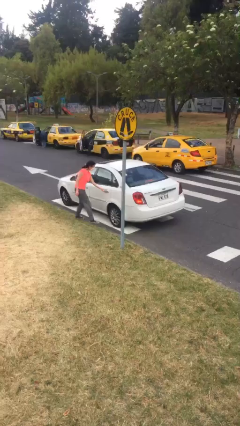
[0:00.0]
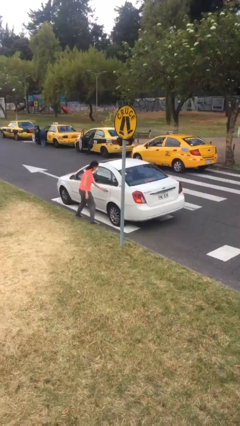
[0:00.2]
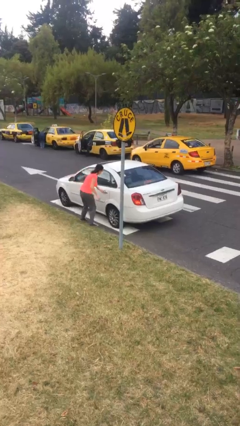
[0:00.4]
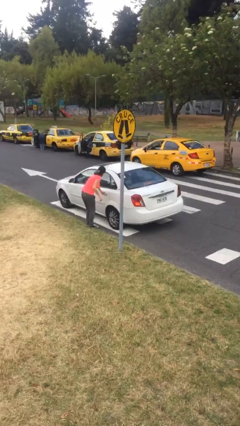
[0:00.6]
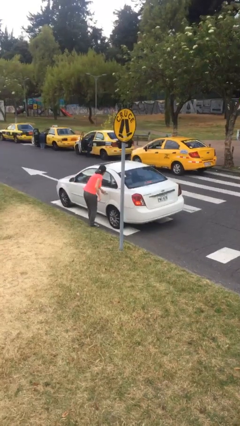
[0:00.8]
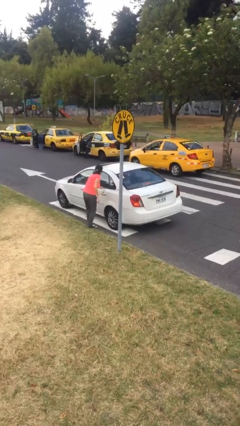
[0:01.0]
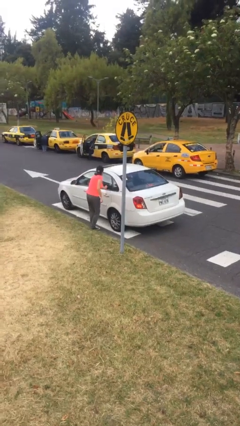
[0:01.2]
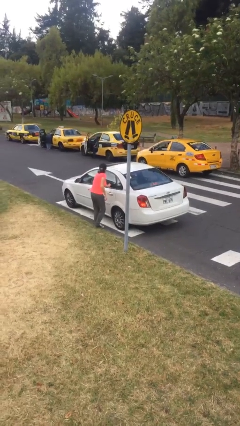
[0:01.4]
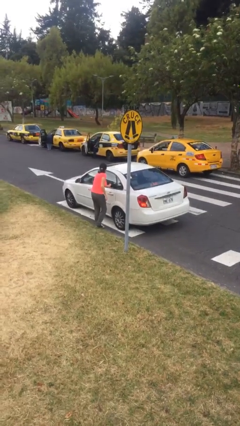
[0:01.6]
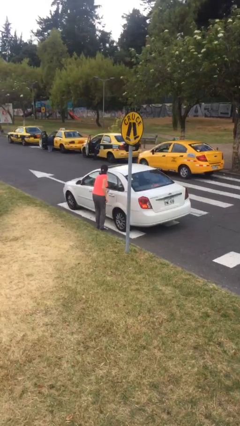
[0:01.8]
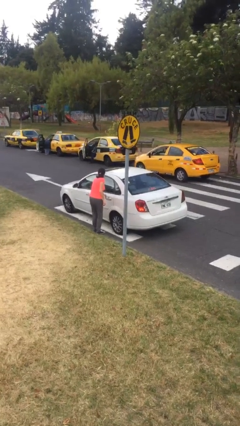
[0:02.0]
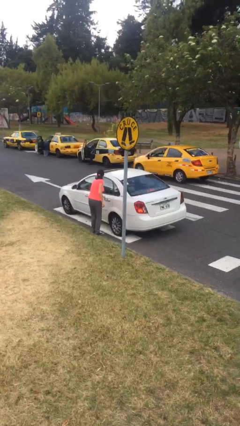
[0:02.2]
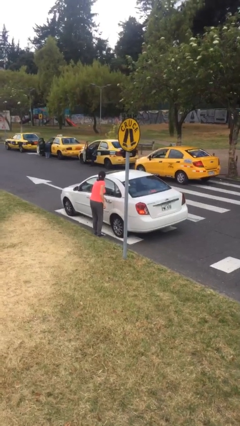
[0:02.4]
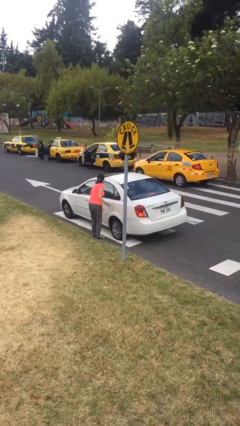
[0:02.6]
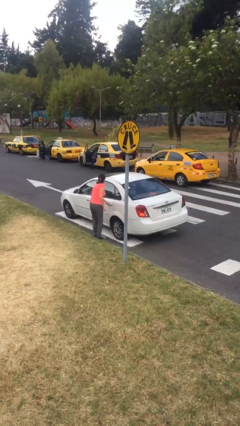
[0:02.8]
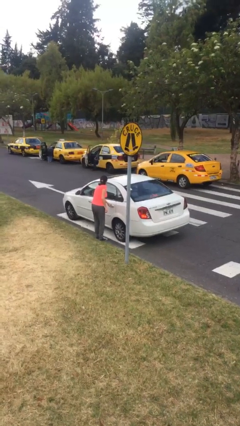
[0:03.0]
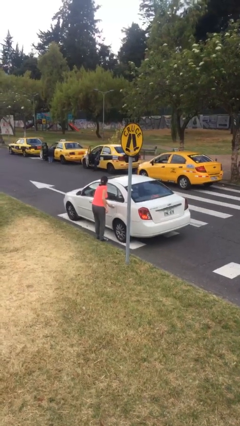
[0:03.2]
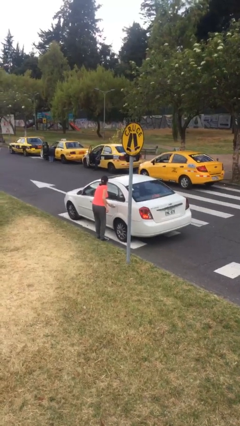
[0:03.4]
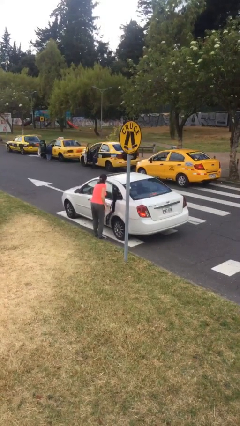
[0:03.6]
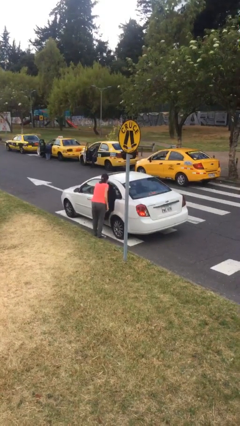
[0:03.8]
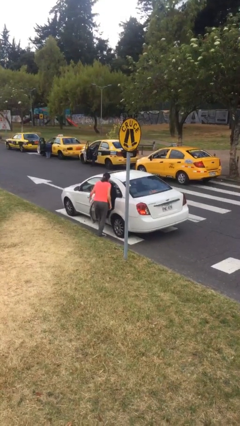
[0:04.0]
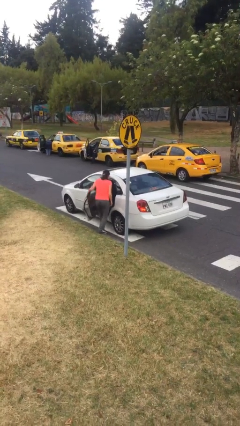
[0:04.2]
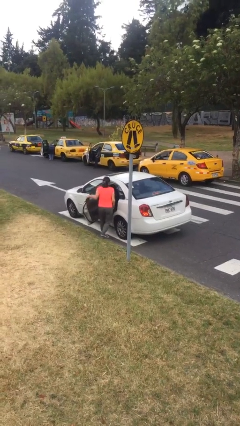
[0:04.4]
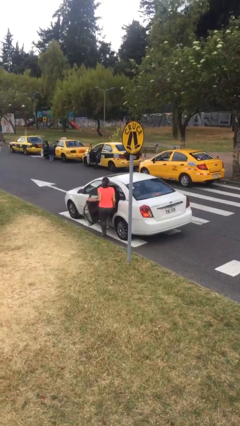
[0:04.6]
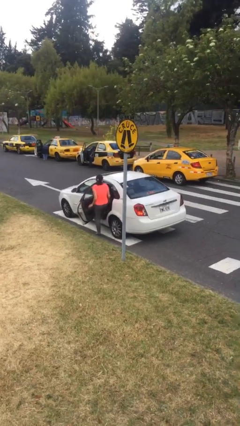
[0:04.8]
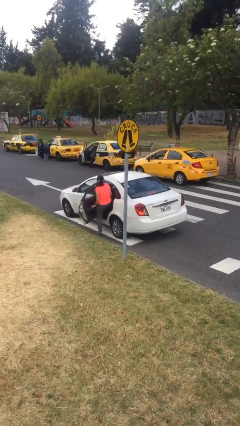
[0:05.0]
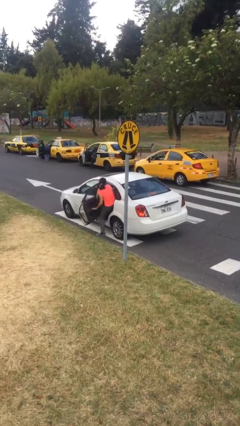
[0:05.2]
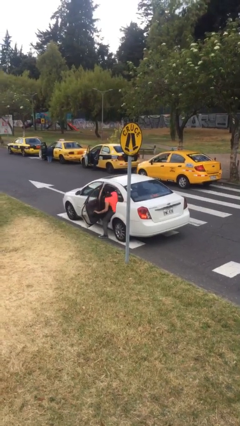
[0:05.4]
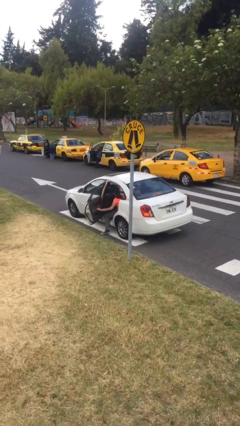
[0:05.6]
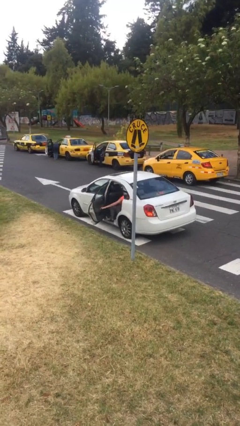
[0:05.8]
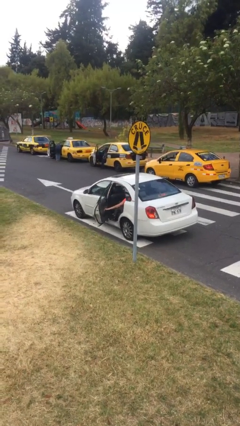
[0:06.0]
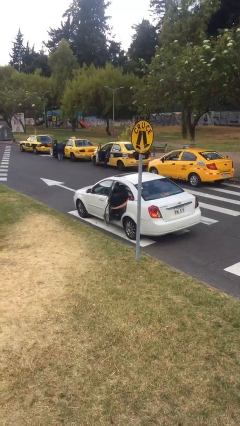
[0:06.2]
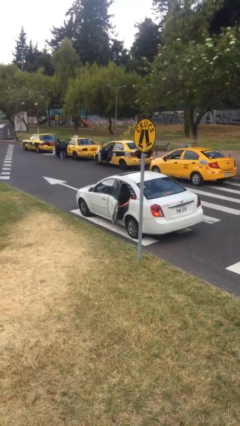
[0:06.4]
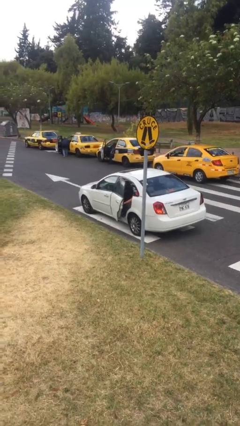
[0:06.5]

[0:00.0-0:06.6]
car picks up person

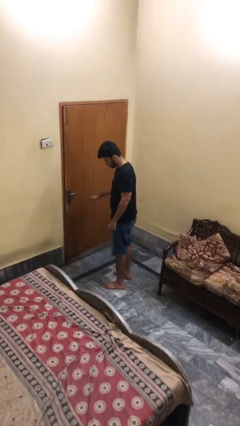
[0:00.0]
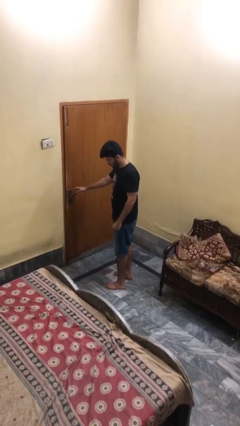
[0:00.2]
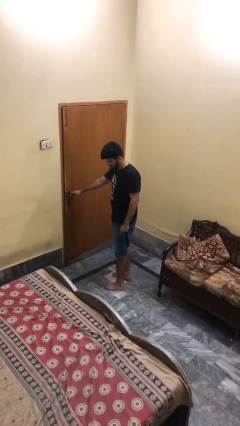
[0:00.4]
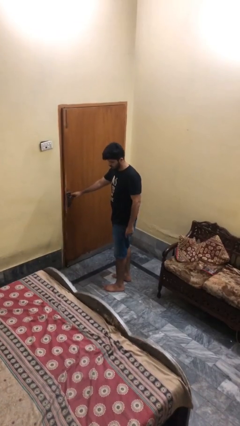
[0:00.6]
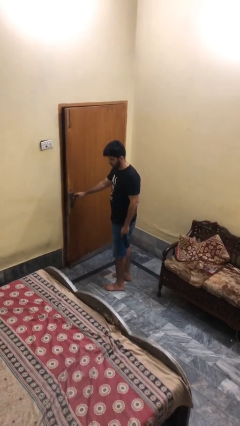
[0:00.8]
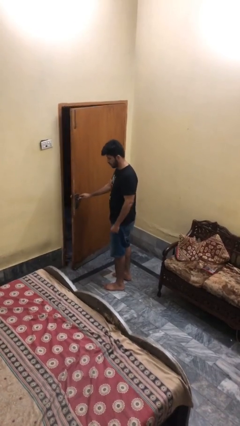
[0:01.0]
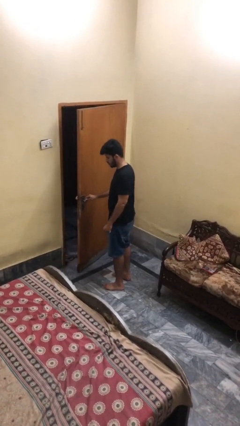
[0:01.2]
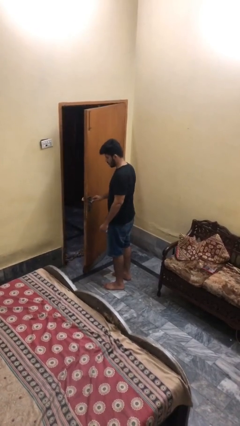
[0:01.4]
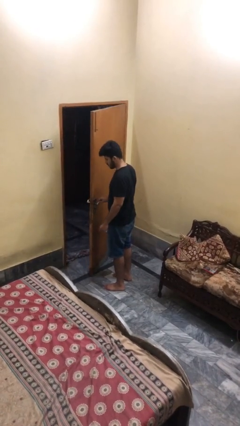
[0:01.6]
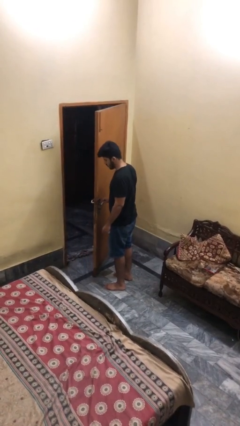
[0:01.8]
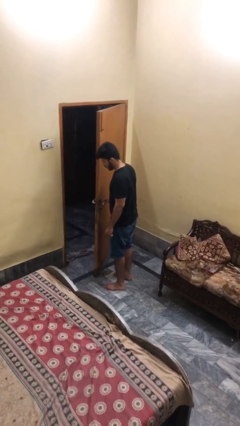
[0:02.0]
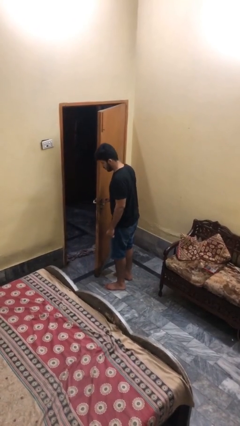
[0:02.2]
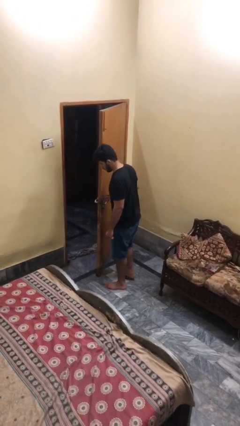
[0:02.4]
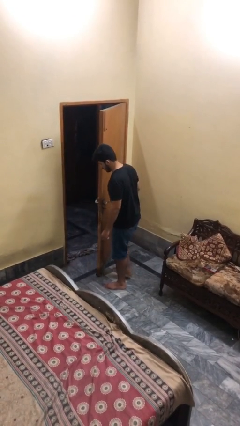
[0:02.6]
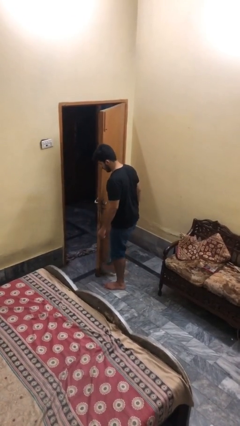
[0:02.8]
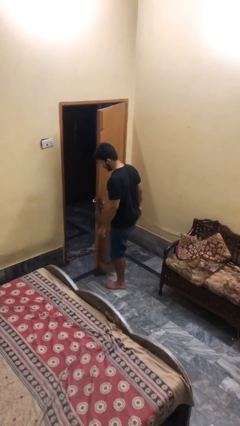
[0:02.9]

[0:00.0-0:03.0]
person opens facility door

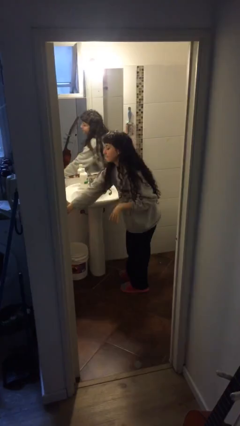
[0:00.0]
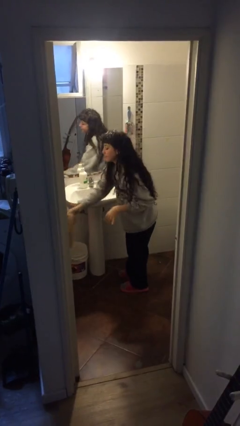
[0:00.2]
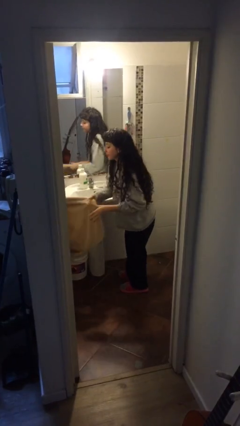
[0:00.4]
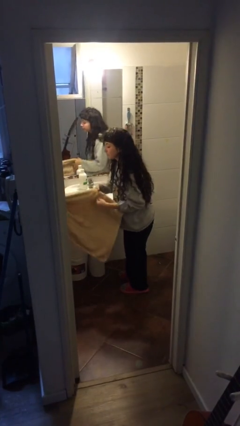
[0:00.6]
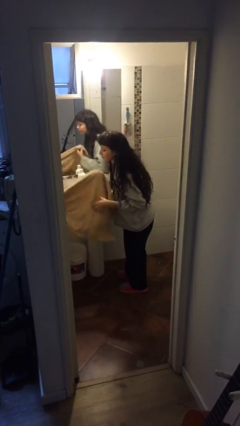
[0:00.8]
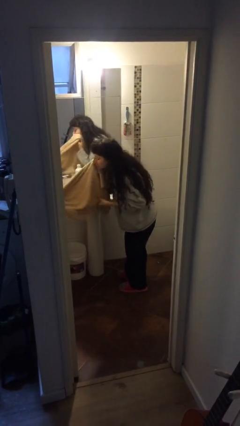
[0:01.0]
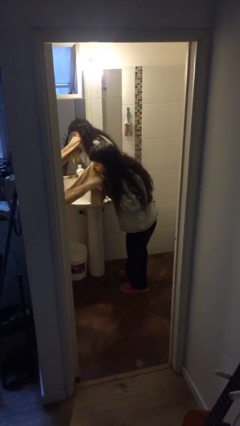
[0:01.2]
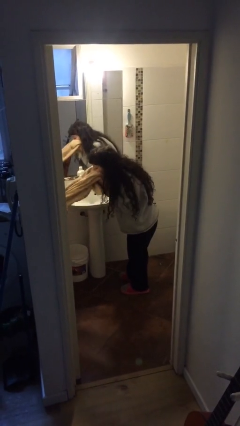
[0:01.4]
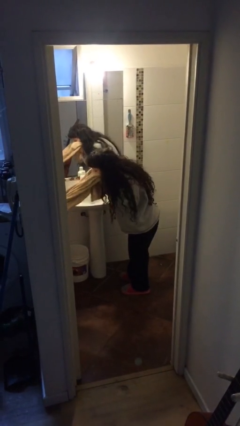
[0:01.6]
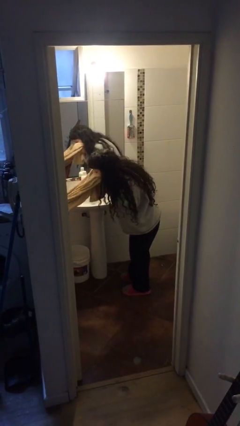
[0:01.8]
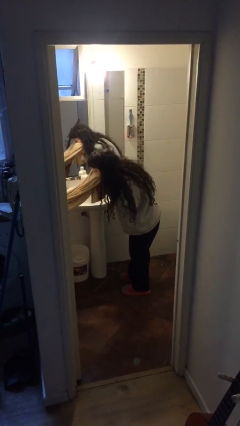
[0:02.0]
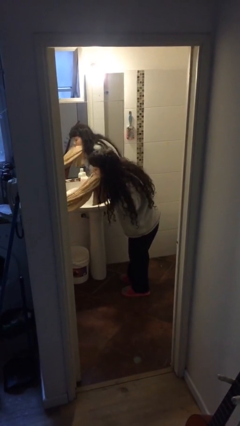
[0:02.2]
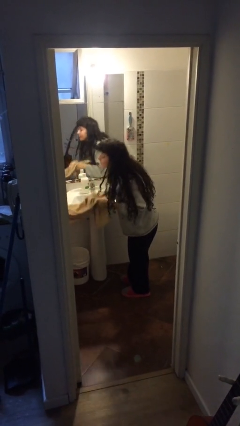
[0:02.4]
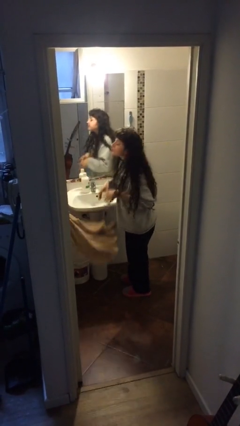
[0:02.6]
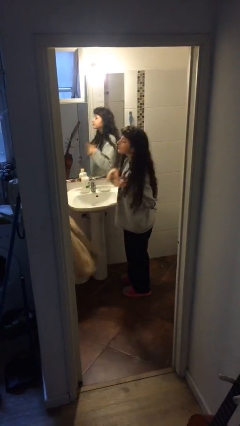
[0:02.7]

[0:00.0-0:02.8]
person dries face with towel

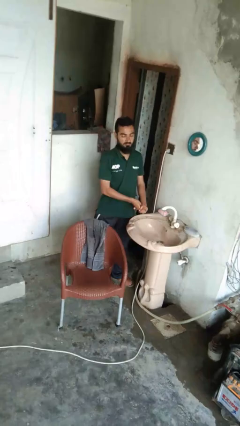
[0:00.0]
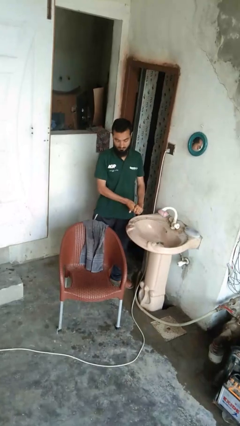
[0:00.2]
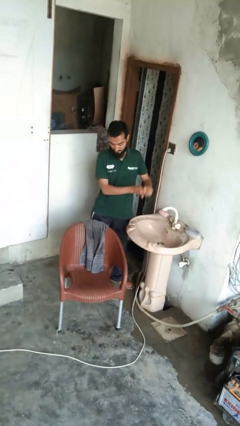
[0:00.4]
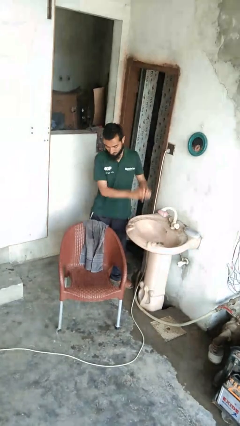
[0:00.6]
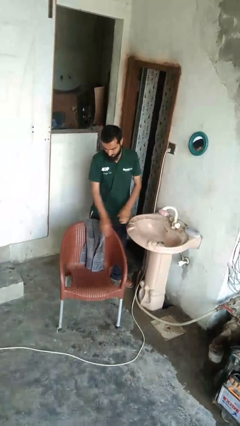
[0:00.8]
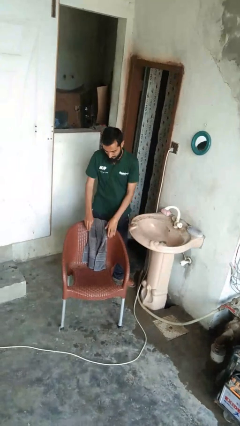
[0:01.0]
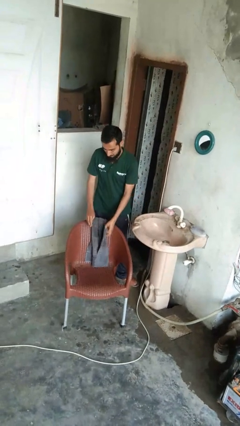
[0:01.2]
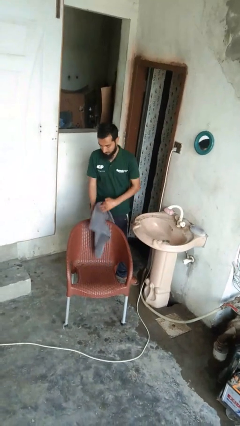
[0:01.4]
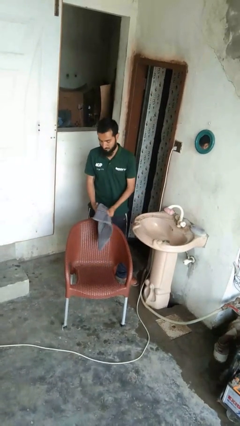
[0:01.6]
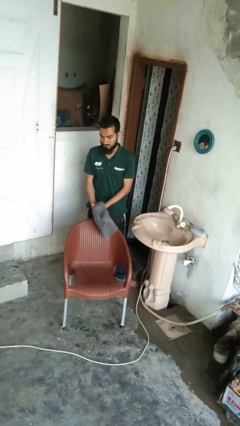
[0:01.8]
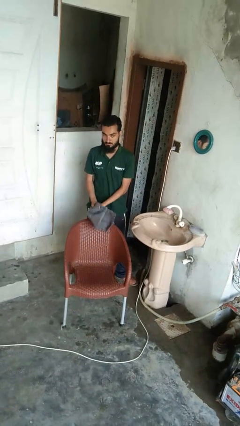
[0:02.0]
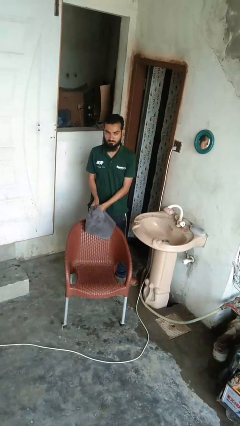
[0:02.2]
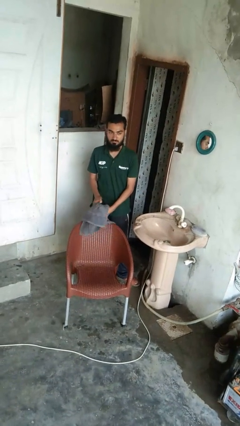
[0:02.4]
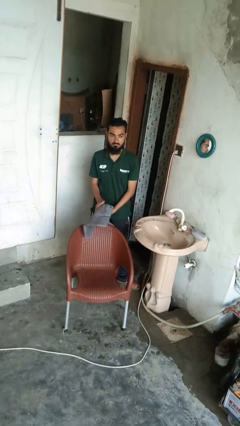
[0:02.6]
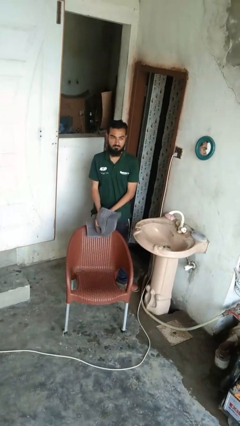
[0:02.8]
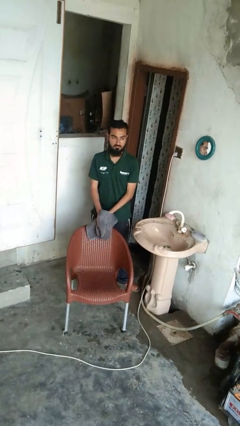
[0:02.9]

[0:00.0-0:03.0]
person dries hands with towel

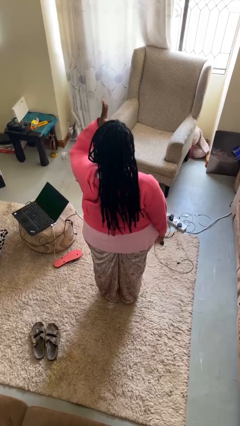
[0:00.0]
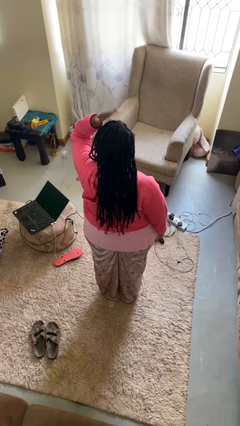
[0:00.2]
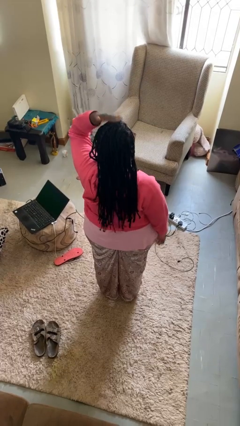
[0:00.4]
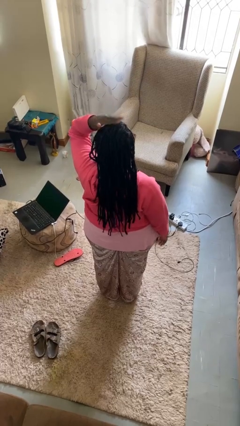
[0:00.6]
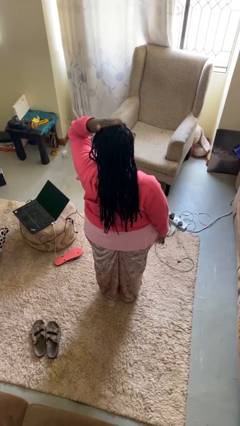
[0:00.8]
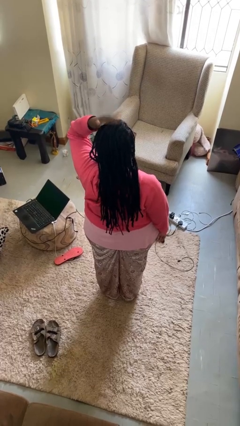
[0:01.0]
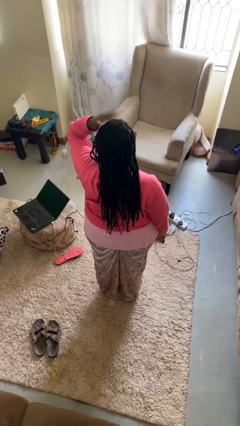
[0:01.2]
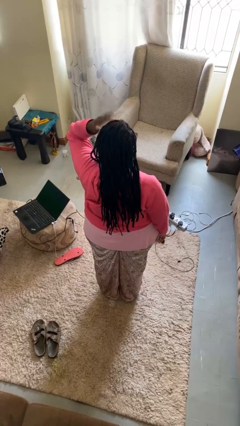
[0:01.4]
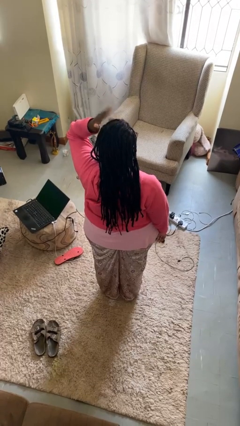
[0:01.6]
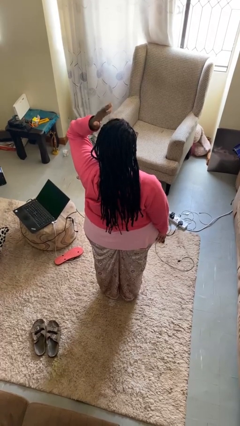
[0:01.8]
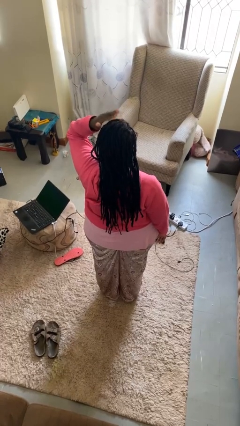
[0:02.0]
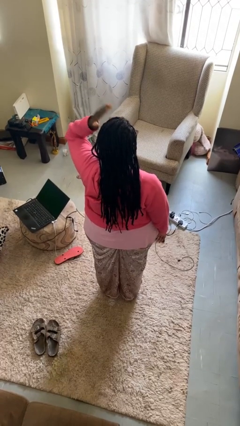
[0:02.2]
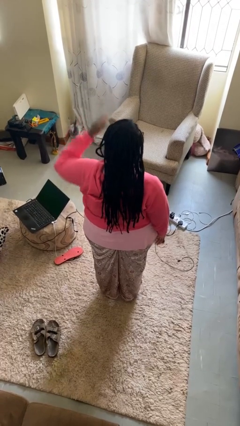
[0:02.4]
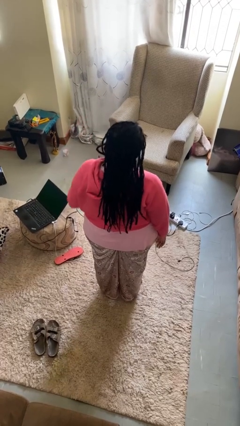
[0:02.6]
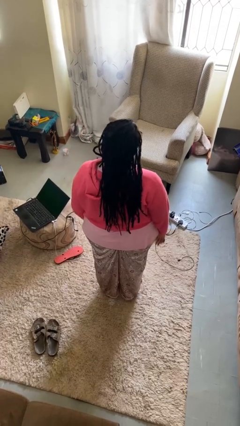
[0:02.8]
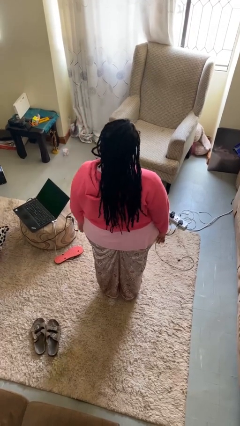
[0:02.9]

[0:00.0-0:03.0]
person pats head
